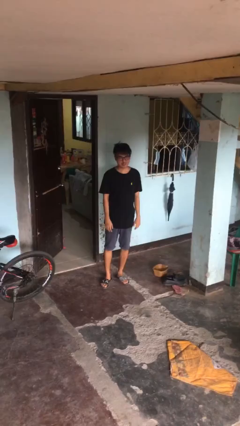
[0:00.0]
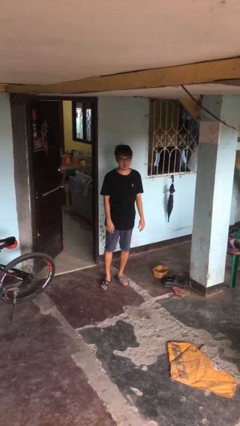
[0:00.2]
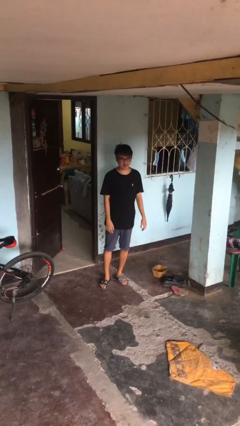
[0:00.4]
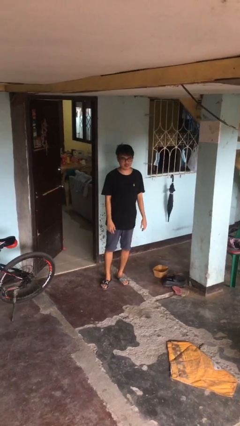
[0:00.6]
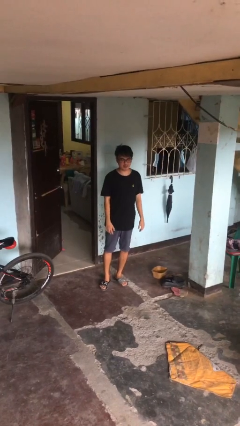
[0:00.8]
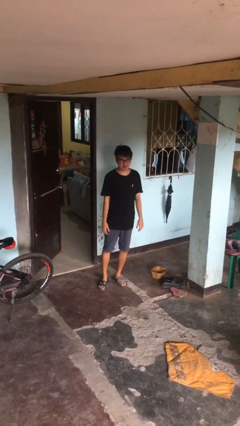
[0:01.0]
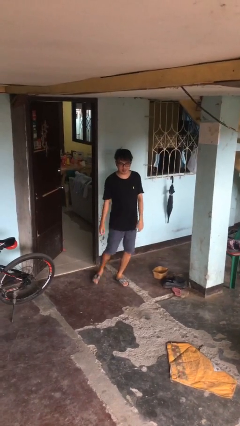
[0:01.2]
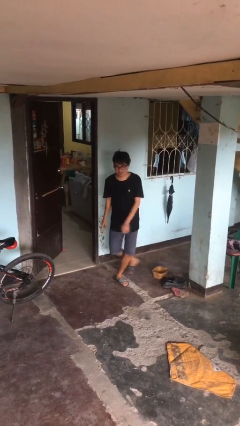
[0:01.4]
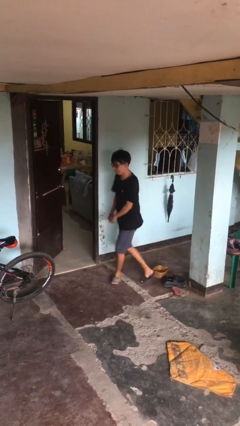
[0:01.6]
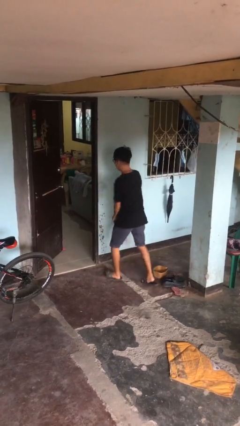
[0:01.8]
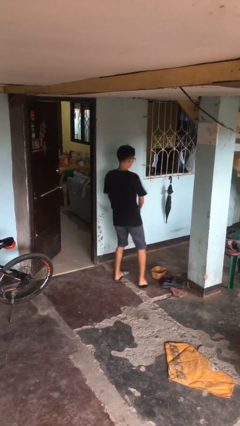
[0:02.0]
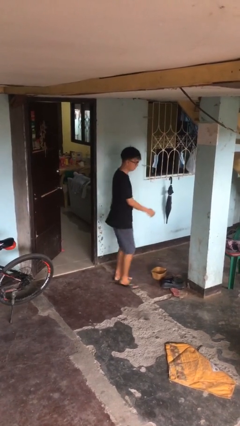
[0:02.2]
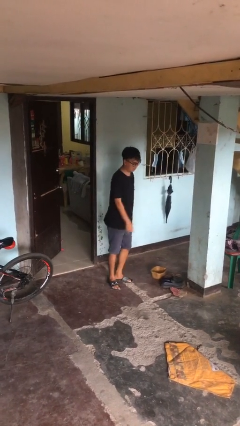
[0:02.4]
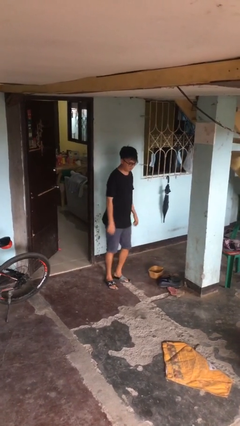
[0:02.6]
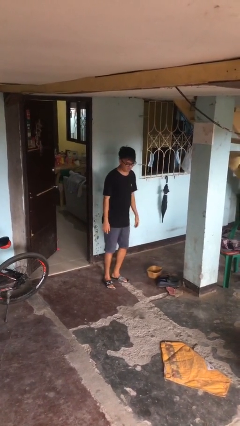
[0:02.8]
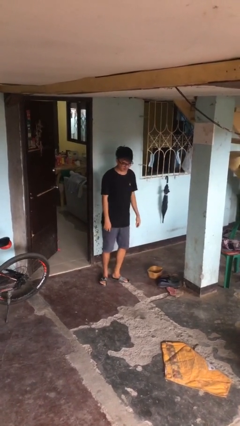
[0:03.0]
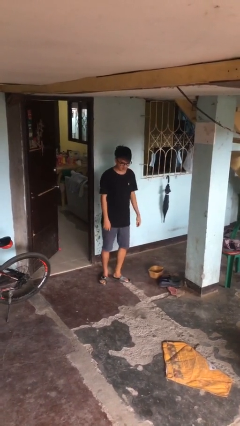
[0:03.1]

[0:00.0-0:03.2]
person twirls

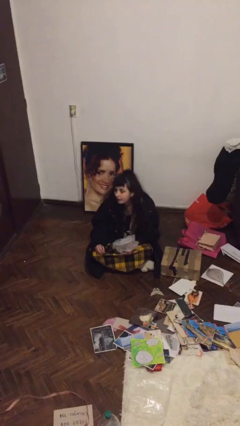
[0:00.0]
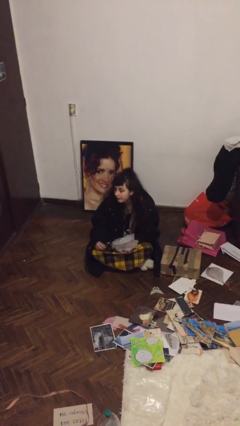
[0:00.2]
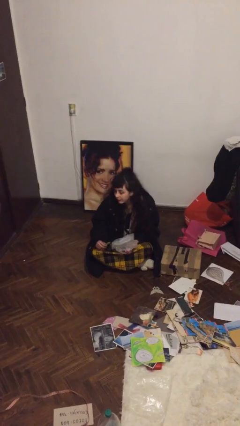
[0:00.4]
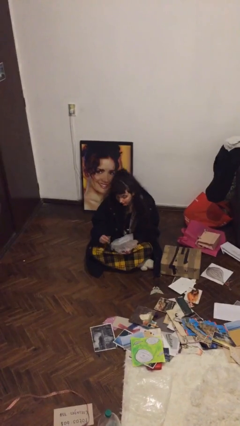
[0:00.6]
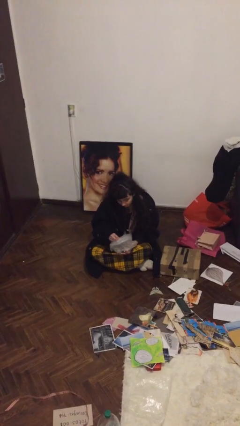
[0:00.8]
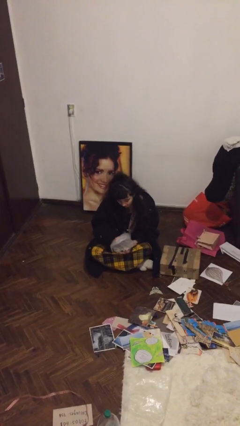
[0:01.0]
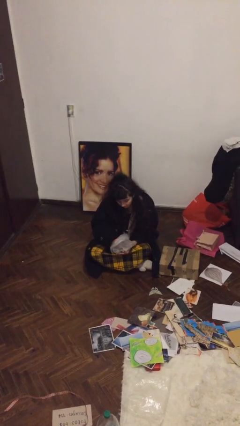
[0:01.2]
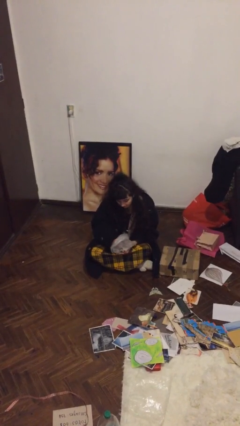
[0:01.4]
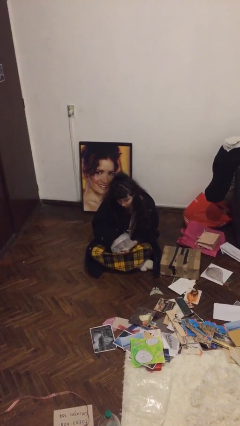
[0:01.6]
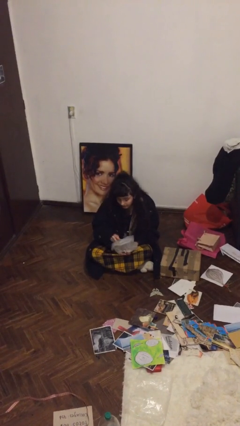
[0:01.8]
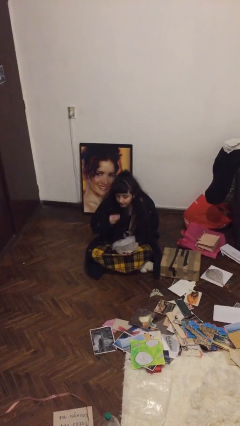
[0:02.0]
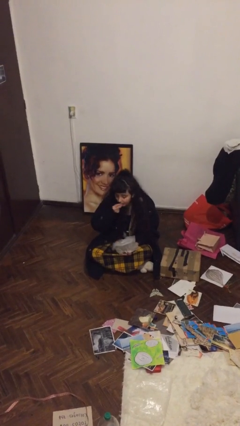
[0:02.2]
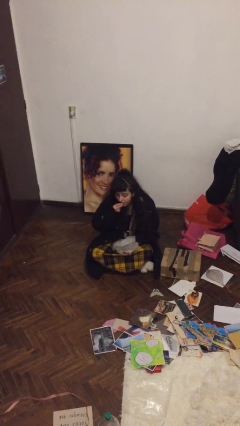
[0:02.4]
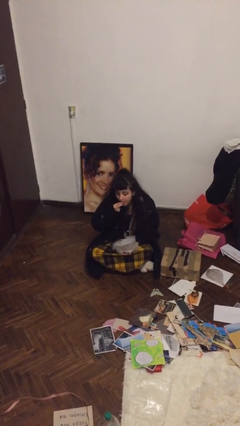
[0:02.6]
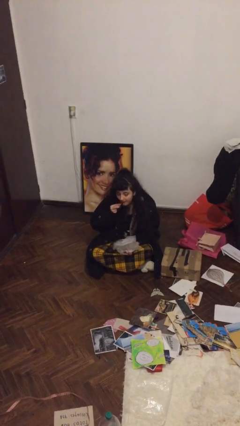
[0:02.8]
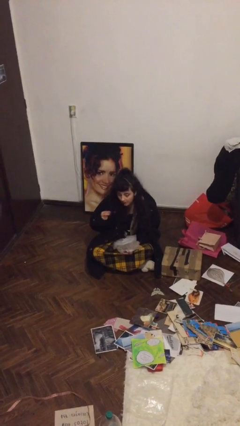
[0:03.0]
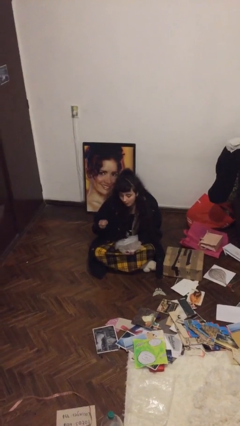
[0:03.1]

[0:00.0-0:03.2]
person eats snack from bag

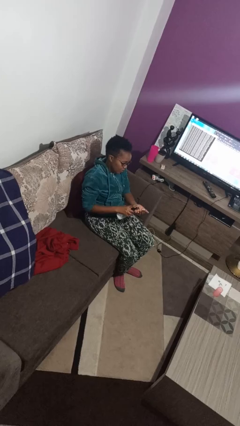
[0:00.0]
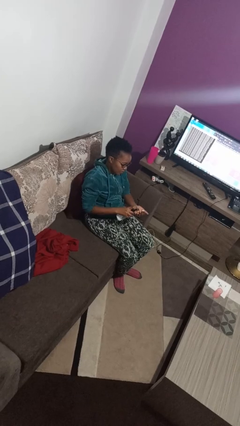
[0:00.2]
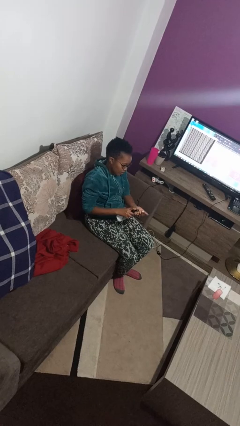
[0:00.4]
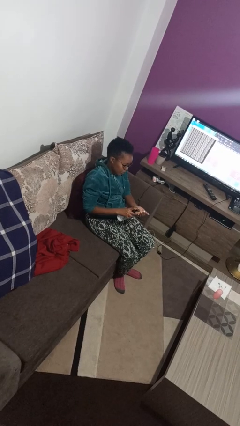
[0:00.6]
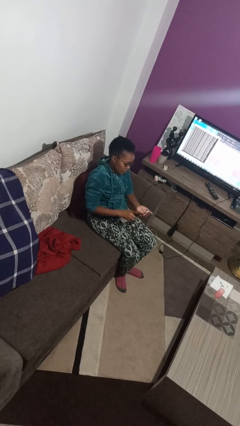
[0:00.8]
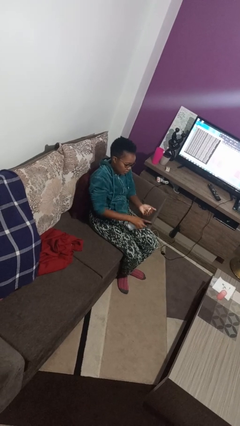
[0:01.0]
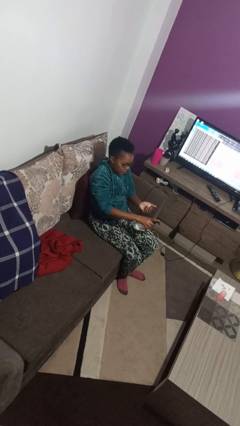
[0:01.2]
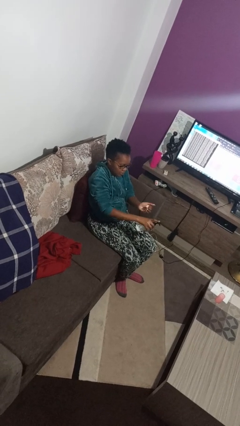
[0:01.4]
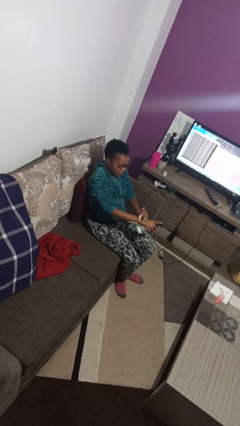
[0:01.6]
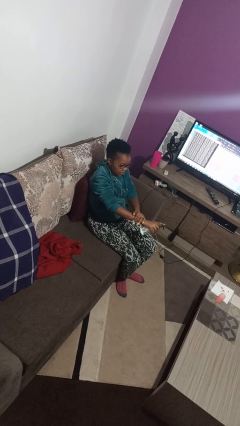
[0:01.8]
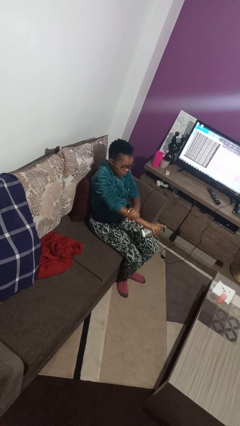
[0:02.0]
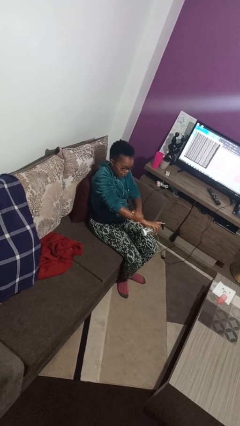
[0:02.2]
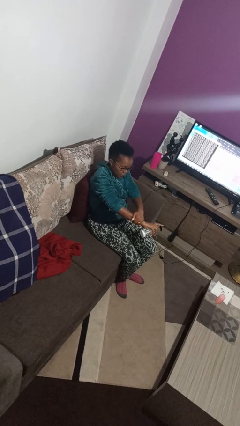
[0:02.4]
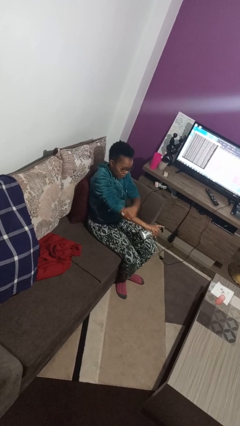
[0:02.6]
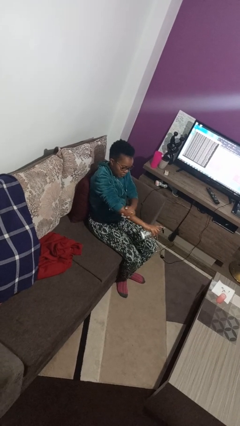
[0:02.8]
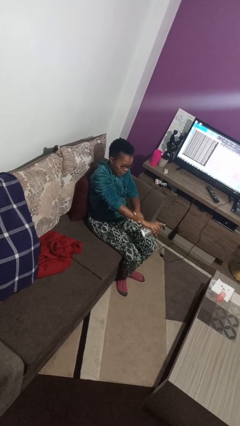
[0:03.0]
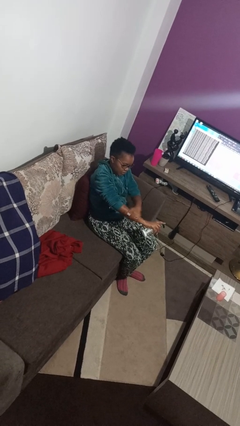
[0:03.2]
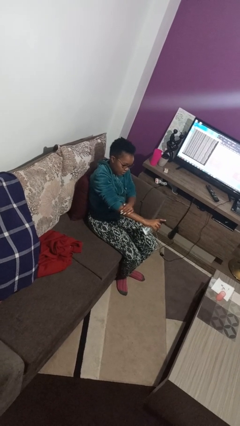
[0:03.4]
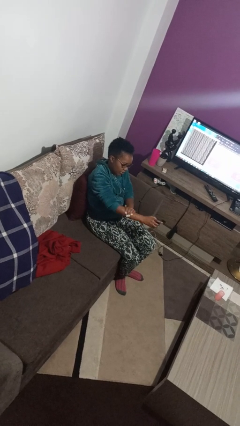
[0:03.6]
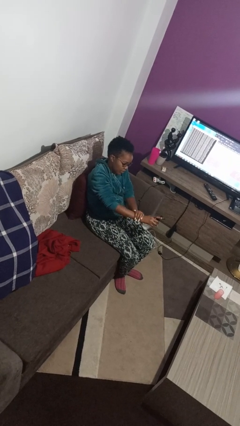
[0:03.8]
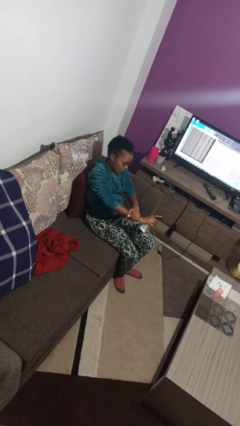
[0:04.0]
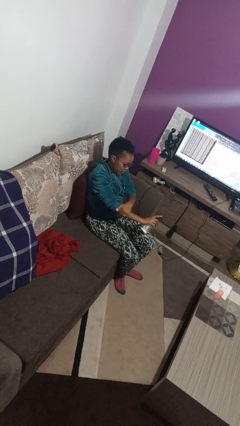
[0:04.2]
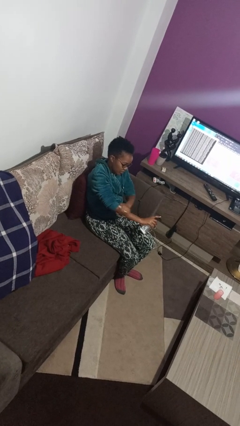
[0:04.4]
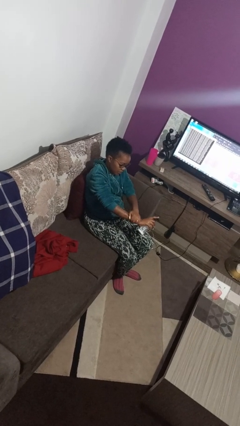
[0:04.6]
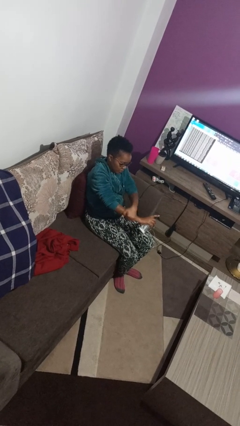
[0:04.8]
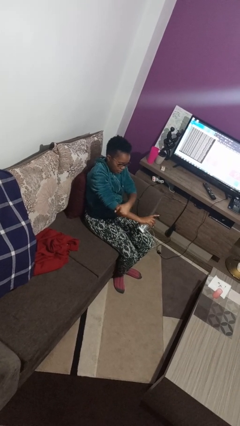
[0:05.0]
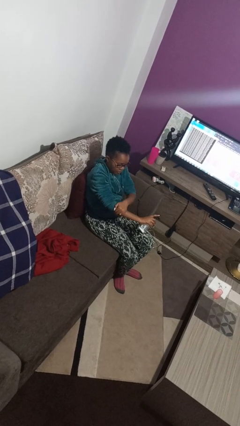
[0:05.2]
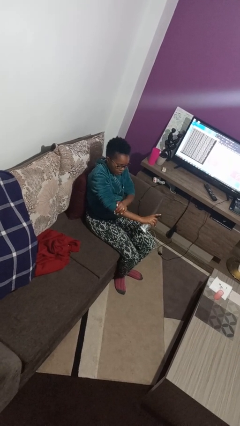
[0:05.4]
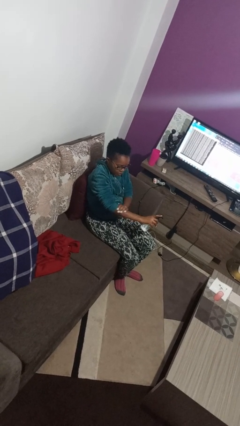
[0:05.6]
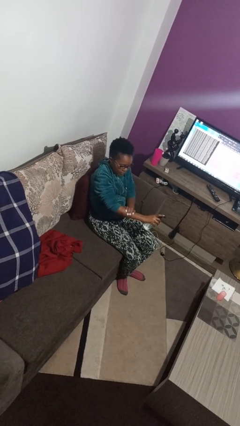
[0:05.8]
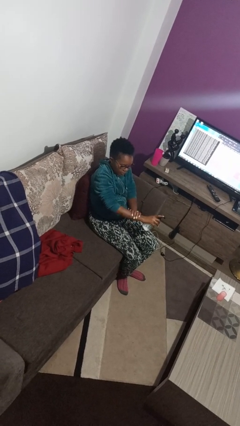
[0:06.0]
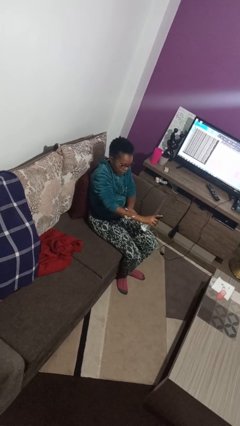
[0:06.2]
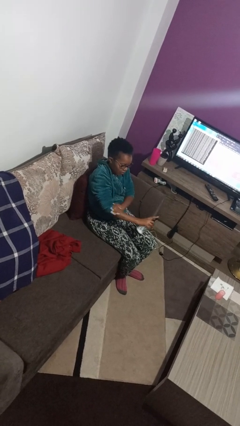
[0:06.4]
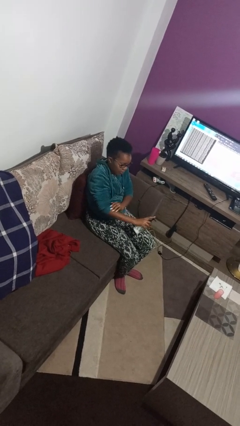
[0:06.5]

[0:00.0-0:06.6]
person applies sunscreen

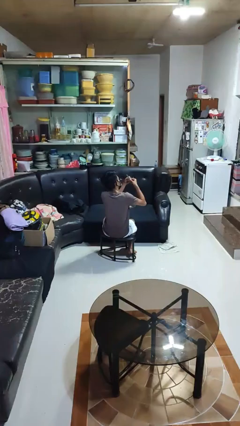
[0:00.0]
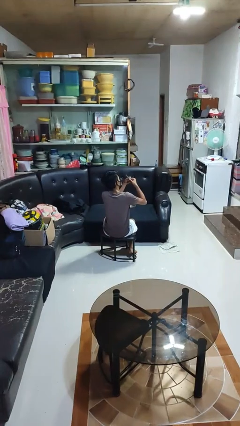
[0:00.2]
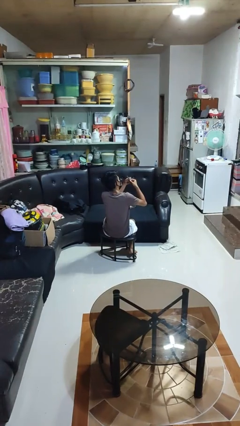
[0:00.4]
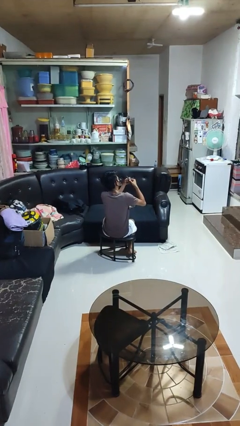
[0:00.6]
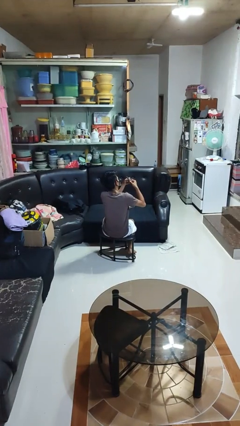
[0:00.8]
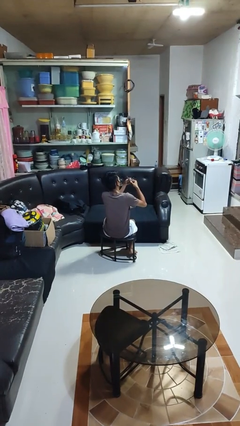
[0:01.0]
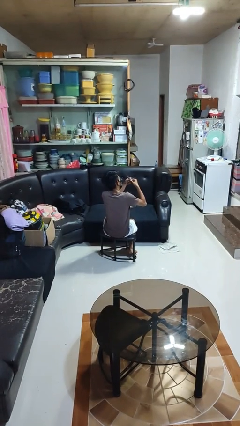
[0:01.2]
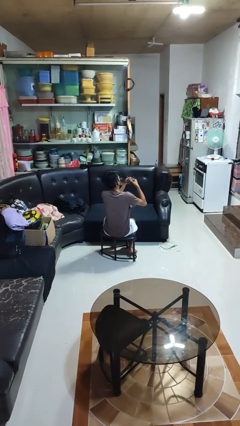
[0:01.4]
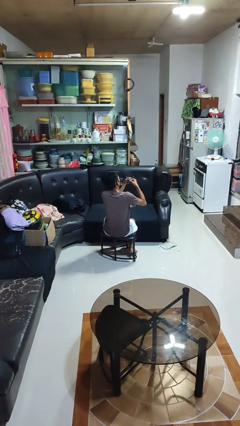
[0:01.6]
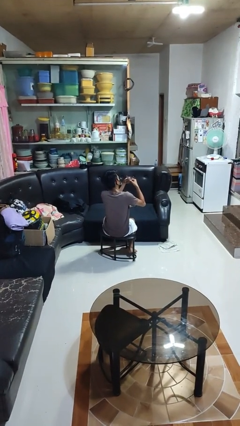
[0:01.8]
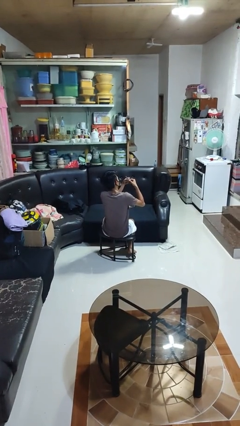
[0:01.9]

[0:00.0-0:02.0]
person files fingernails

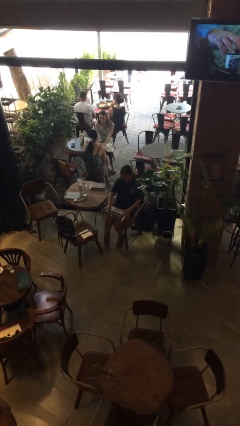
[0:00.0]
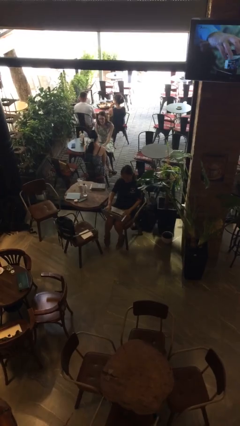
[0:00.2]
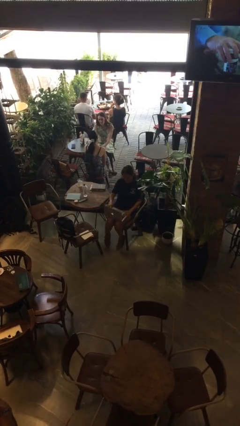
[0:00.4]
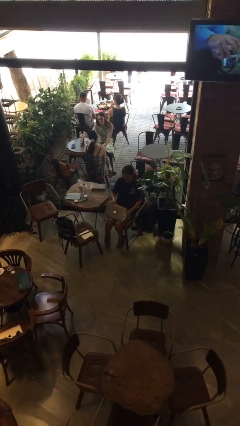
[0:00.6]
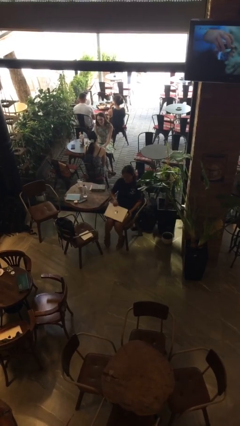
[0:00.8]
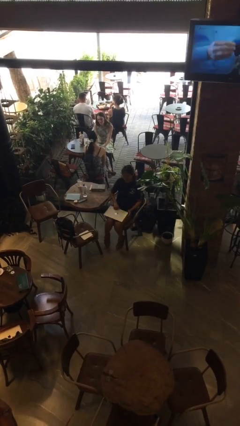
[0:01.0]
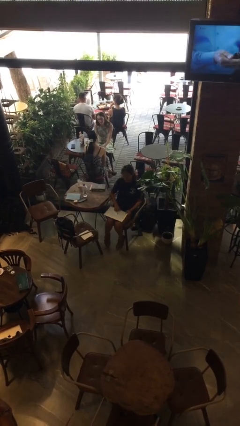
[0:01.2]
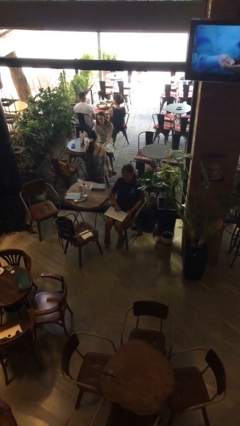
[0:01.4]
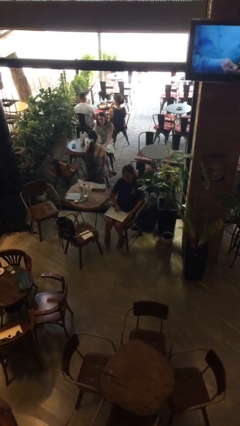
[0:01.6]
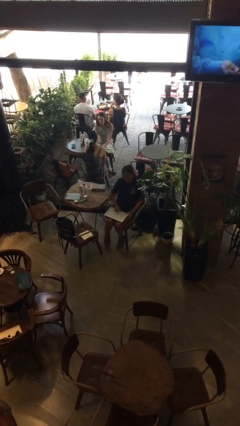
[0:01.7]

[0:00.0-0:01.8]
person closes laptop

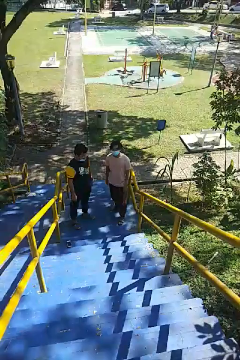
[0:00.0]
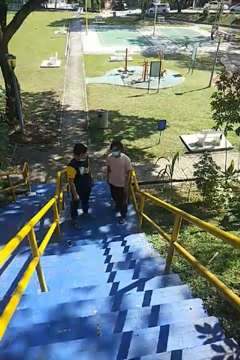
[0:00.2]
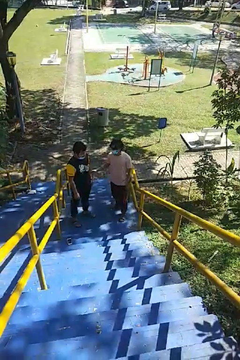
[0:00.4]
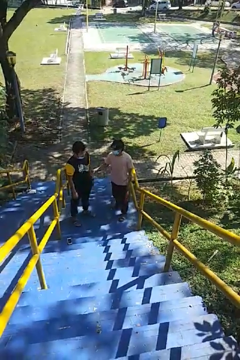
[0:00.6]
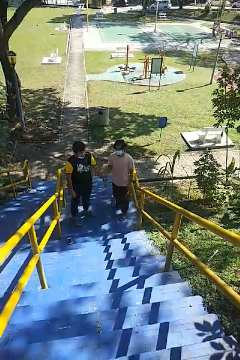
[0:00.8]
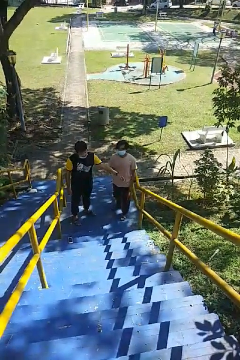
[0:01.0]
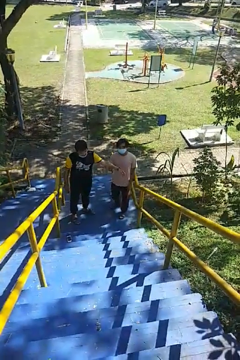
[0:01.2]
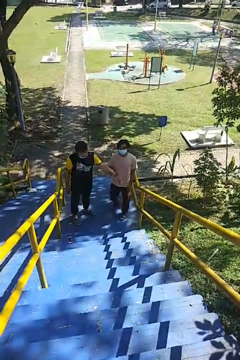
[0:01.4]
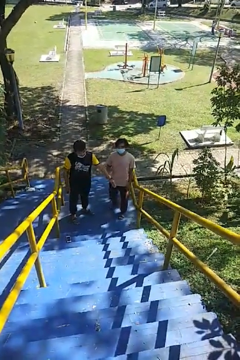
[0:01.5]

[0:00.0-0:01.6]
person grabs person by forearm
